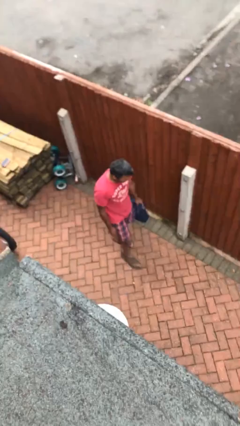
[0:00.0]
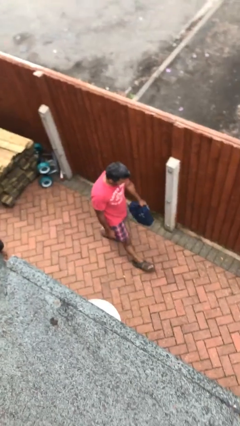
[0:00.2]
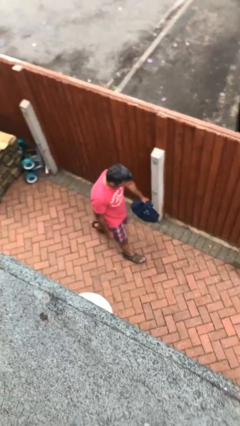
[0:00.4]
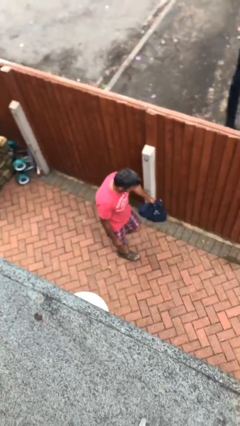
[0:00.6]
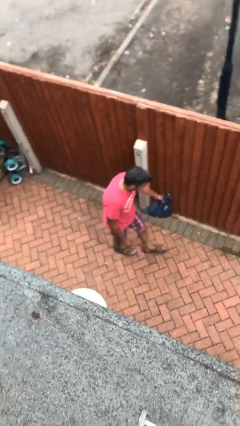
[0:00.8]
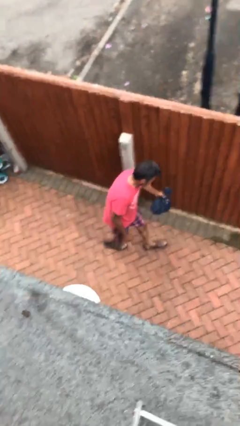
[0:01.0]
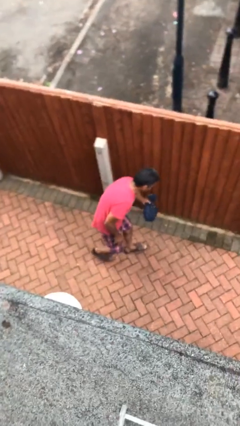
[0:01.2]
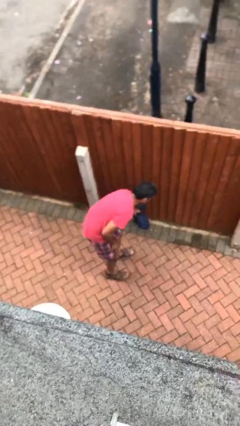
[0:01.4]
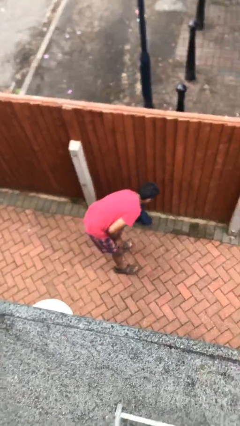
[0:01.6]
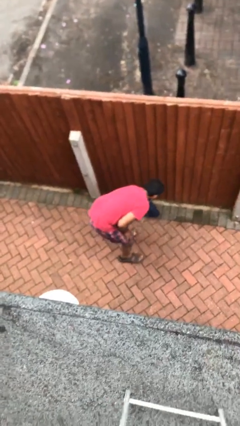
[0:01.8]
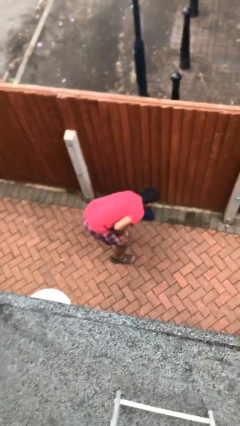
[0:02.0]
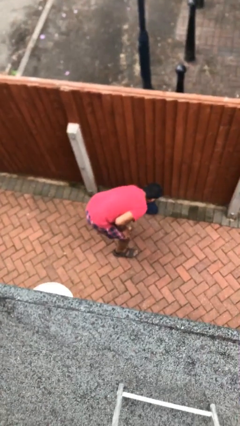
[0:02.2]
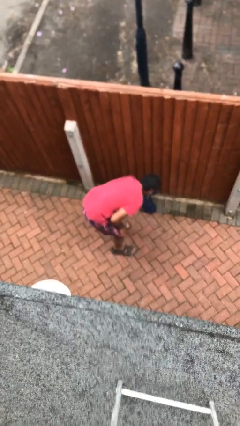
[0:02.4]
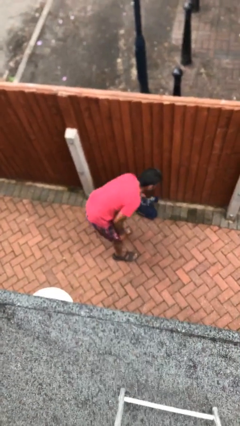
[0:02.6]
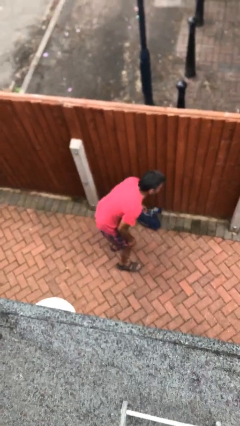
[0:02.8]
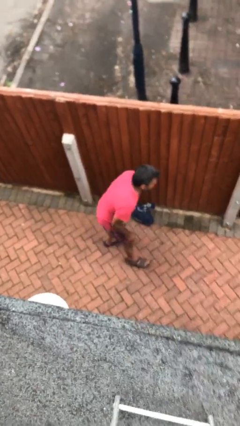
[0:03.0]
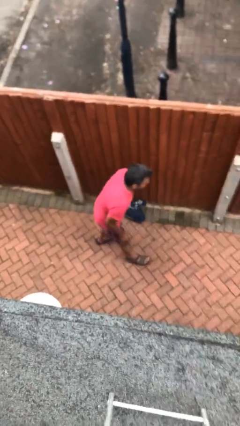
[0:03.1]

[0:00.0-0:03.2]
person puts down object on floor

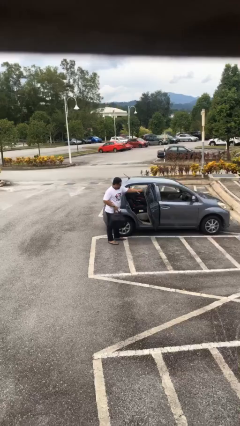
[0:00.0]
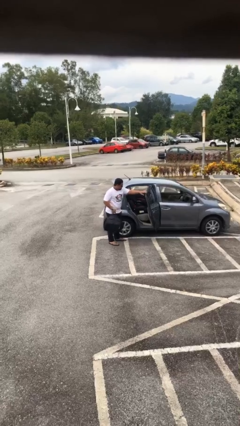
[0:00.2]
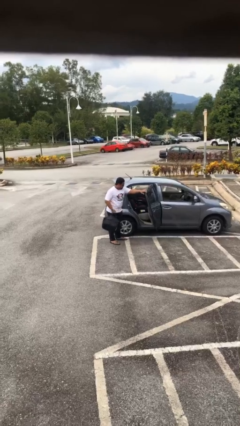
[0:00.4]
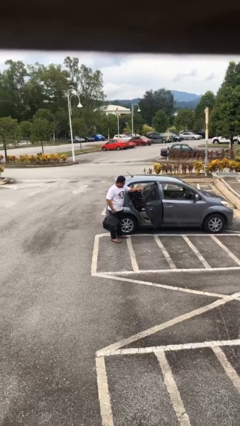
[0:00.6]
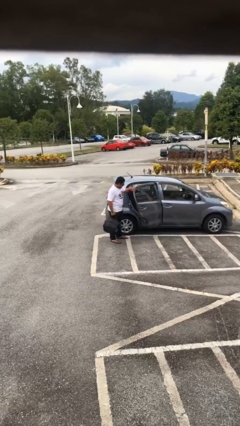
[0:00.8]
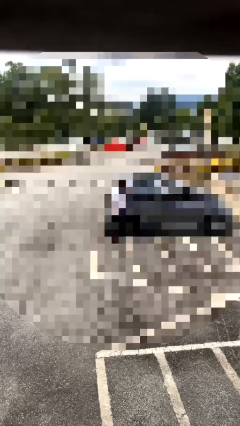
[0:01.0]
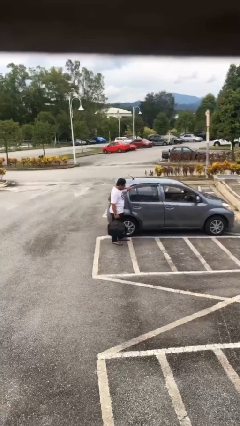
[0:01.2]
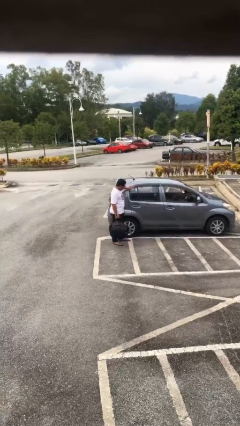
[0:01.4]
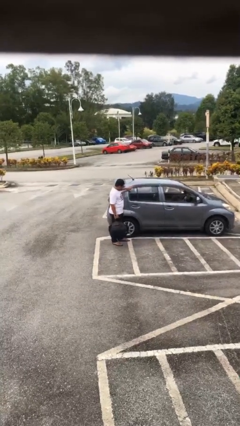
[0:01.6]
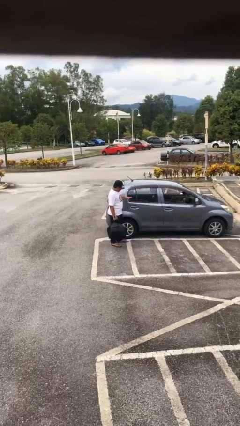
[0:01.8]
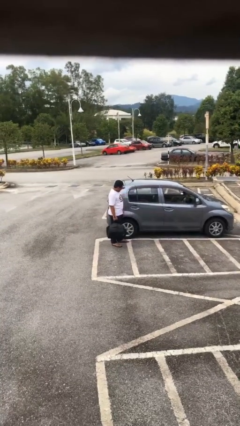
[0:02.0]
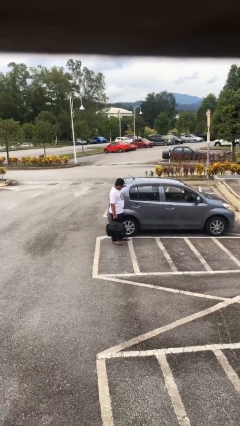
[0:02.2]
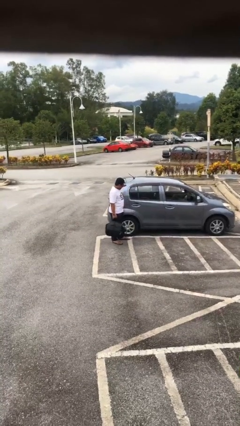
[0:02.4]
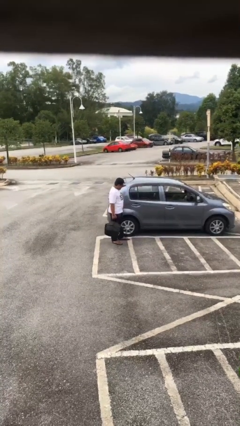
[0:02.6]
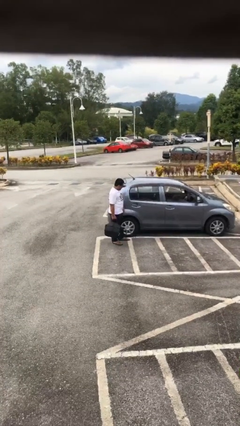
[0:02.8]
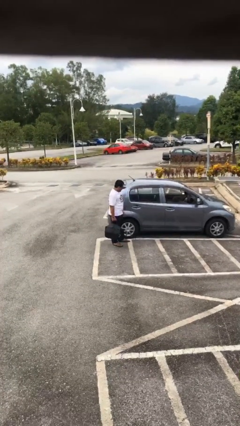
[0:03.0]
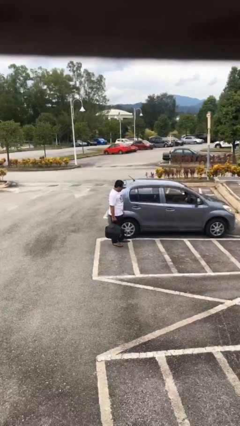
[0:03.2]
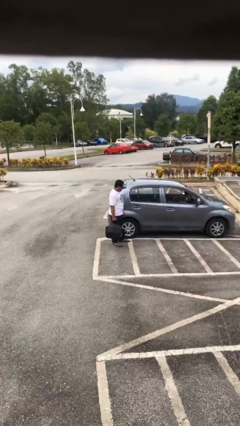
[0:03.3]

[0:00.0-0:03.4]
person closes car door

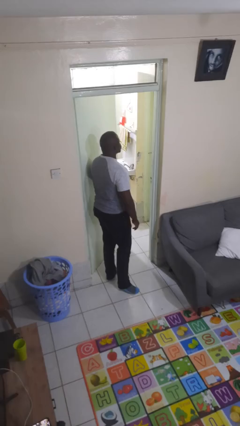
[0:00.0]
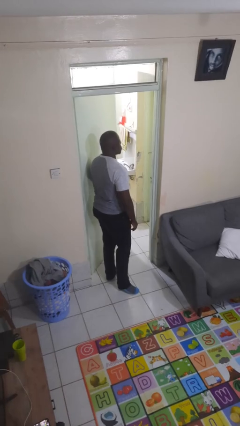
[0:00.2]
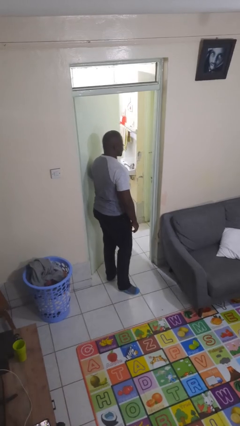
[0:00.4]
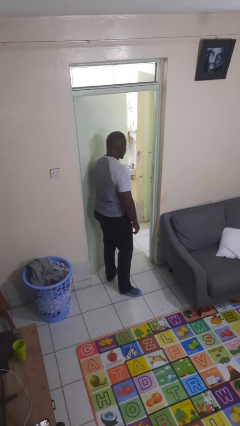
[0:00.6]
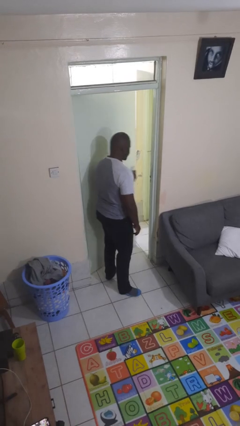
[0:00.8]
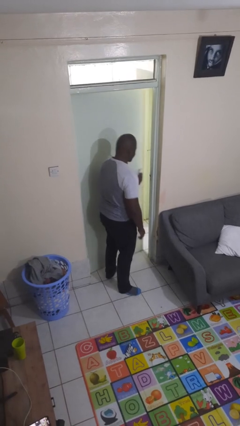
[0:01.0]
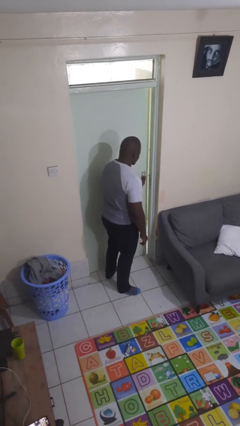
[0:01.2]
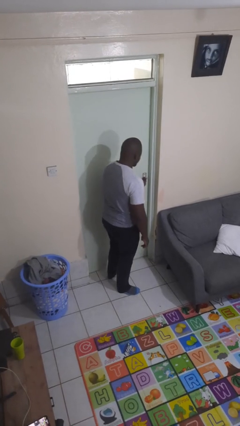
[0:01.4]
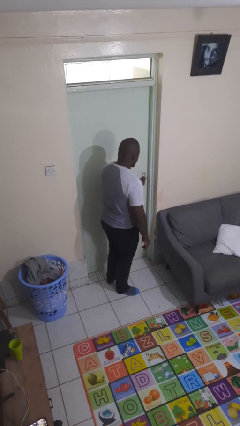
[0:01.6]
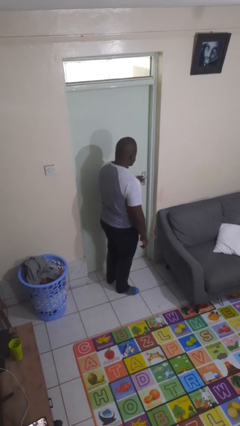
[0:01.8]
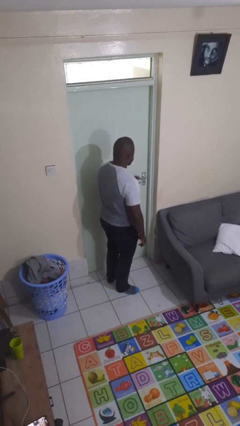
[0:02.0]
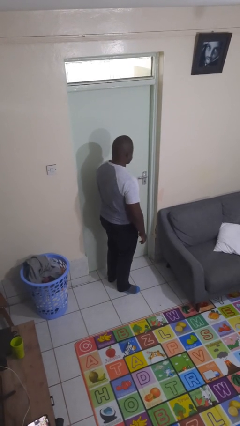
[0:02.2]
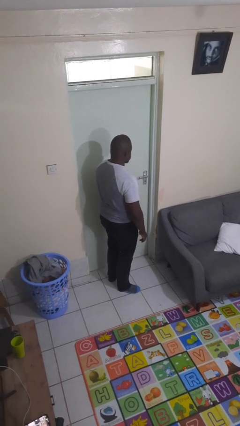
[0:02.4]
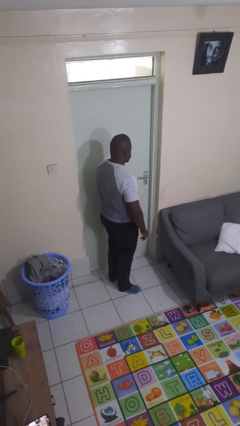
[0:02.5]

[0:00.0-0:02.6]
person closes facility door

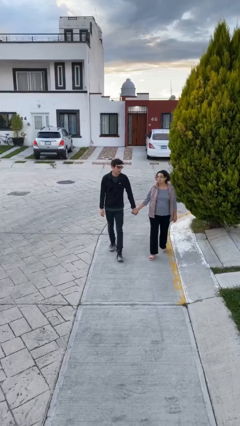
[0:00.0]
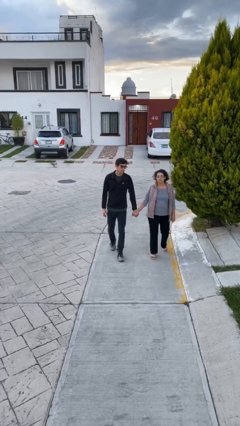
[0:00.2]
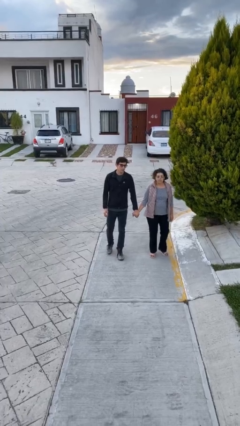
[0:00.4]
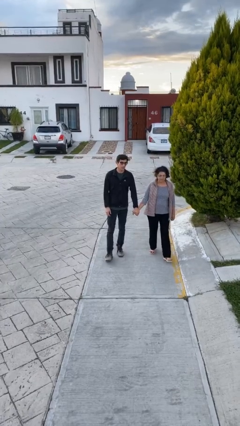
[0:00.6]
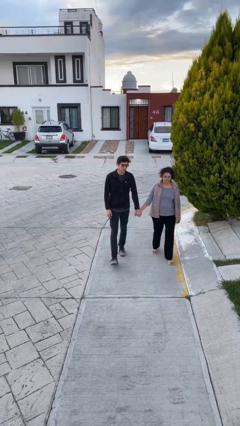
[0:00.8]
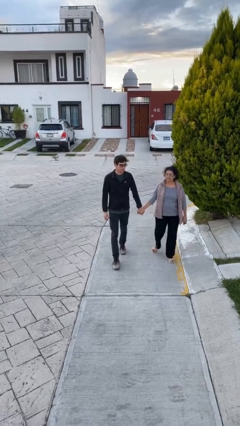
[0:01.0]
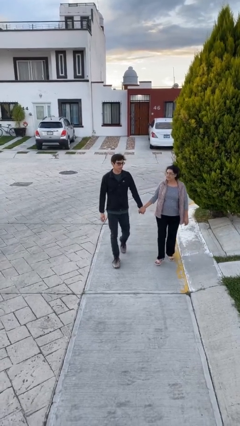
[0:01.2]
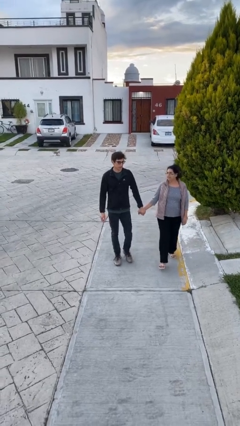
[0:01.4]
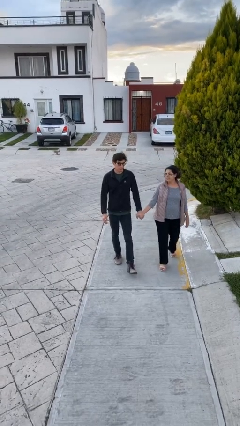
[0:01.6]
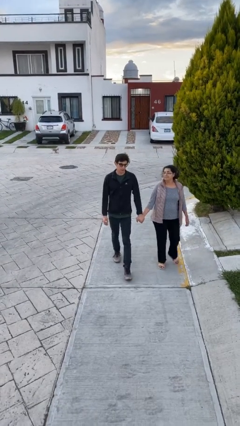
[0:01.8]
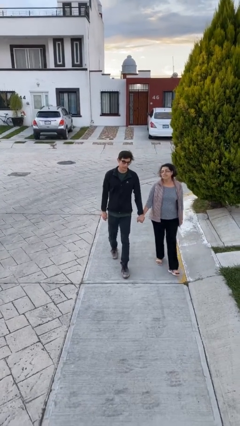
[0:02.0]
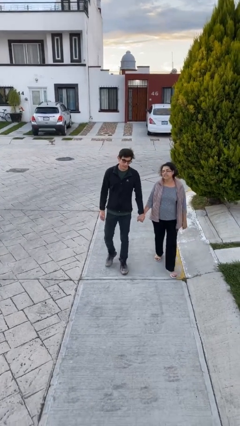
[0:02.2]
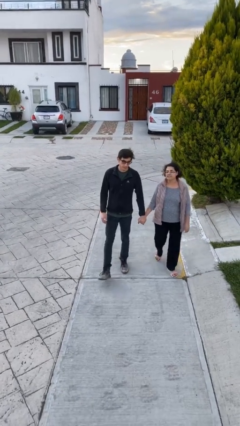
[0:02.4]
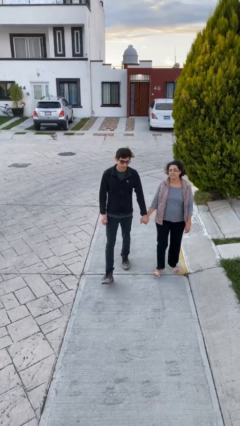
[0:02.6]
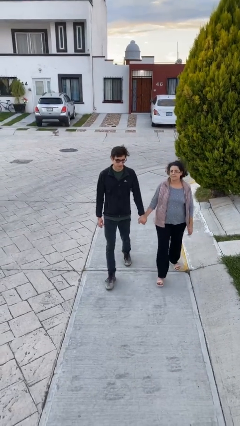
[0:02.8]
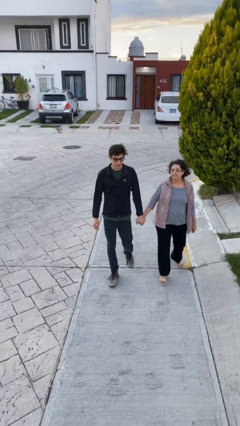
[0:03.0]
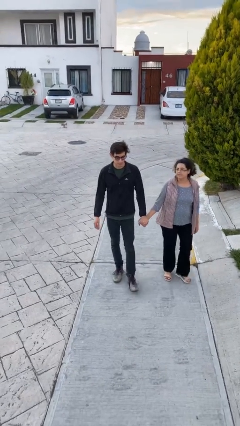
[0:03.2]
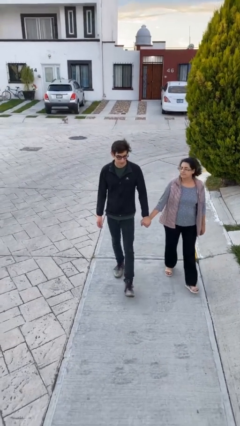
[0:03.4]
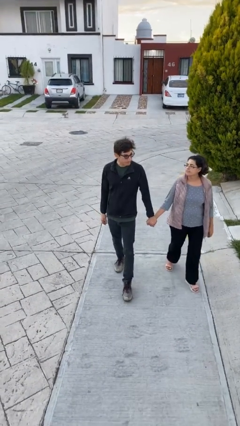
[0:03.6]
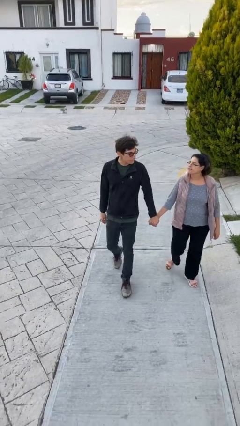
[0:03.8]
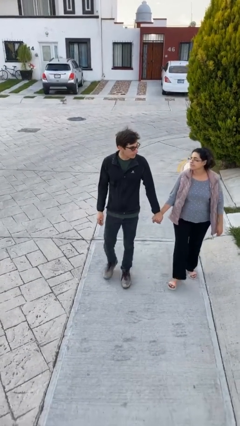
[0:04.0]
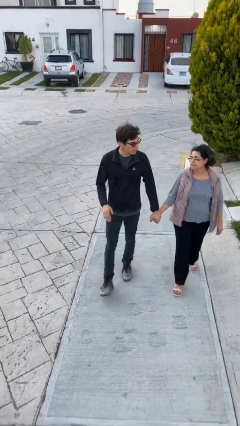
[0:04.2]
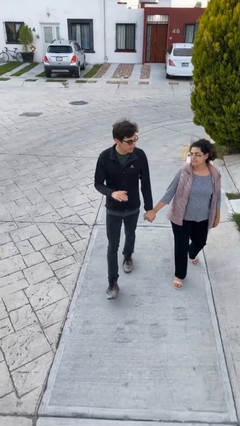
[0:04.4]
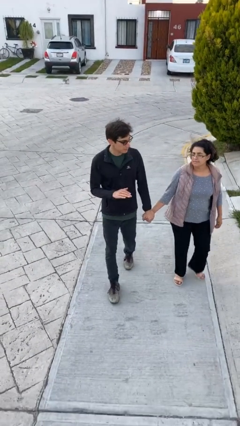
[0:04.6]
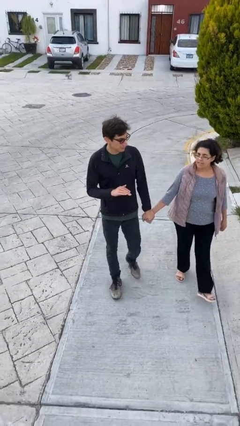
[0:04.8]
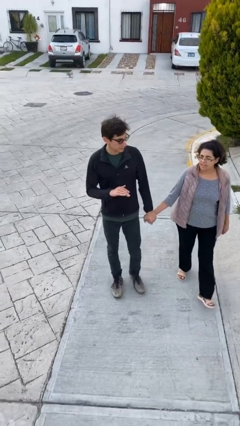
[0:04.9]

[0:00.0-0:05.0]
person holds hand

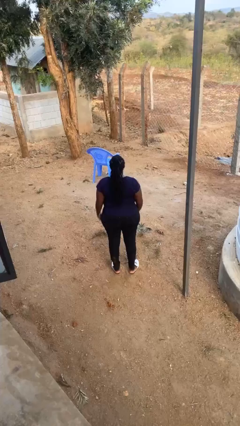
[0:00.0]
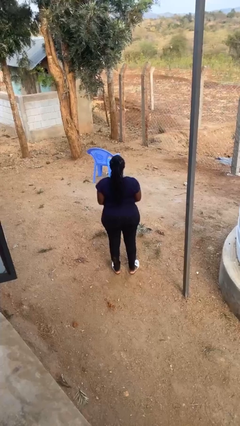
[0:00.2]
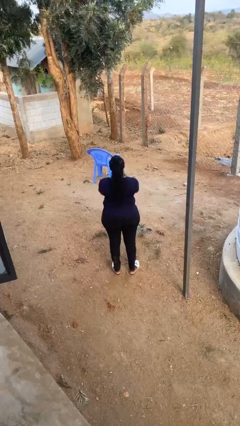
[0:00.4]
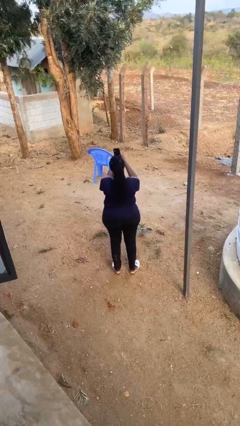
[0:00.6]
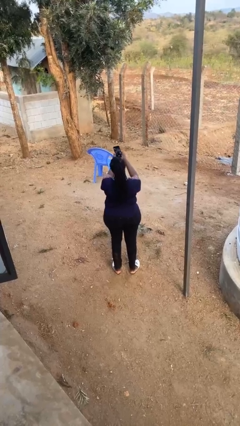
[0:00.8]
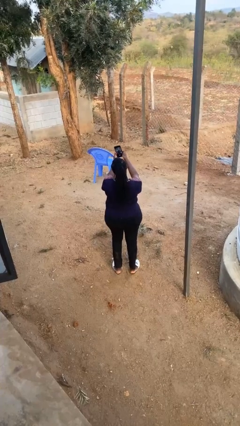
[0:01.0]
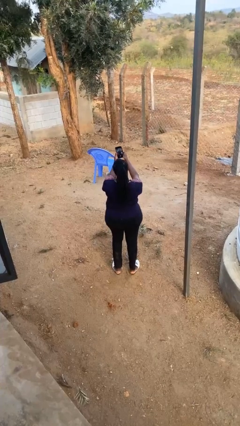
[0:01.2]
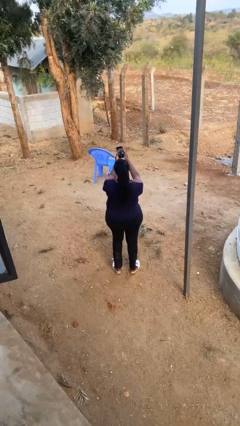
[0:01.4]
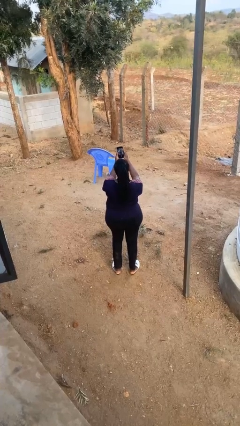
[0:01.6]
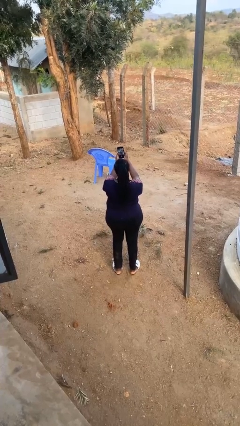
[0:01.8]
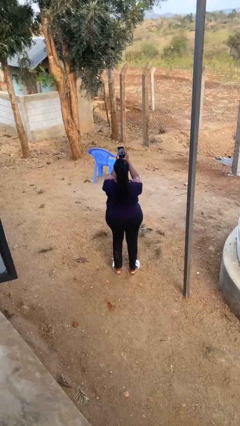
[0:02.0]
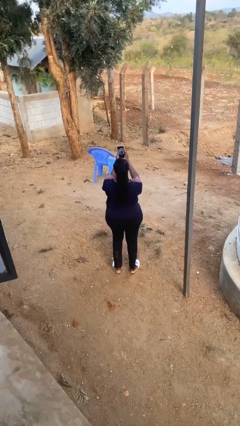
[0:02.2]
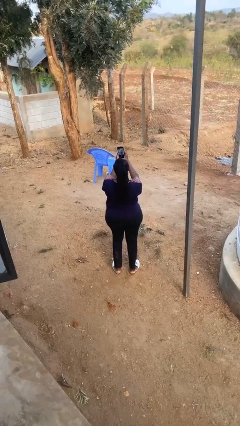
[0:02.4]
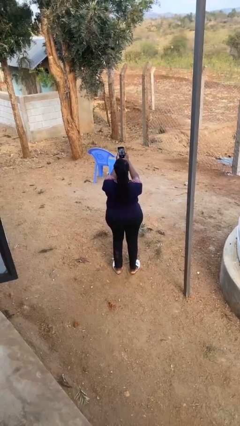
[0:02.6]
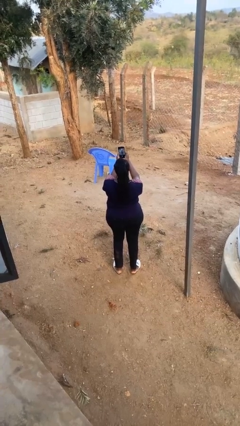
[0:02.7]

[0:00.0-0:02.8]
person takes selfie

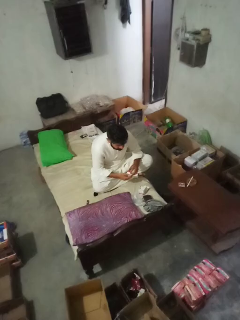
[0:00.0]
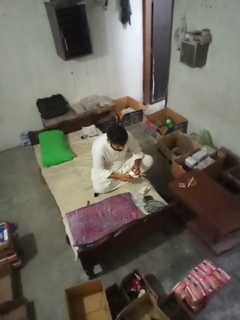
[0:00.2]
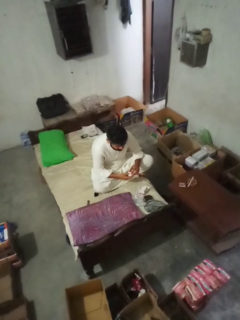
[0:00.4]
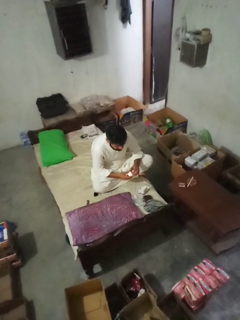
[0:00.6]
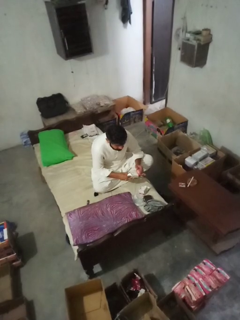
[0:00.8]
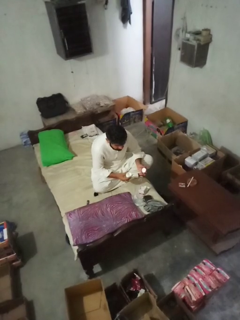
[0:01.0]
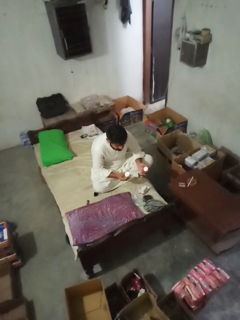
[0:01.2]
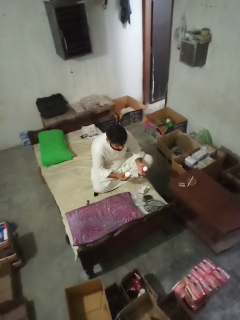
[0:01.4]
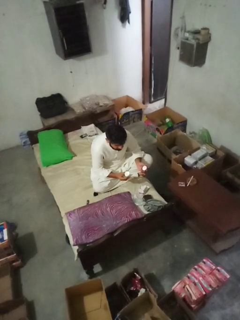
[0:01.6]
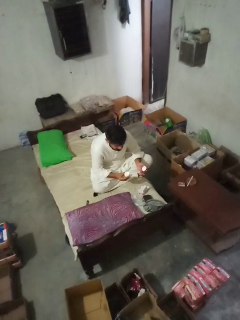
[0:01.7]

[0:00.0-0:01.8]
person opens jar
